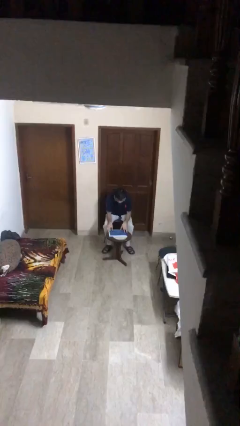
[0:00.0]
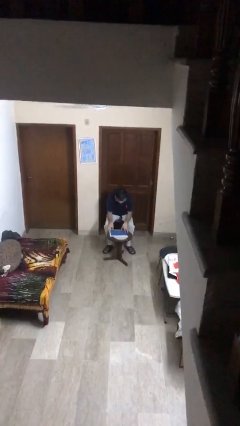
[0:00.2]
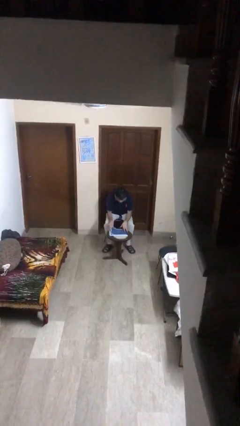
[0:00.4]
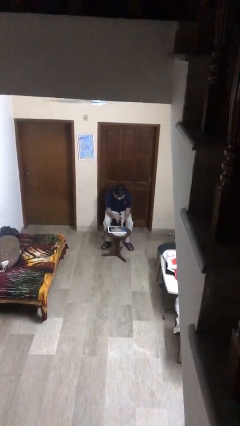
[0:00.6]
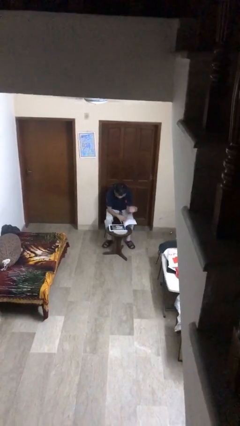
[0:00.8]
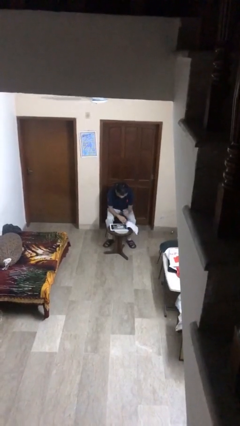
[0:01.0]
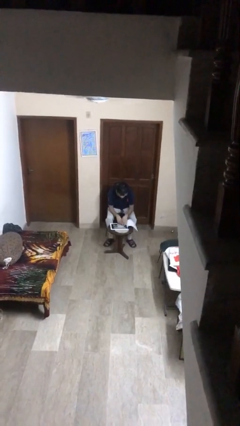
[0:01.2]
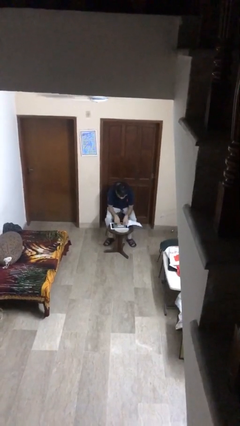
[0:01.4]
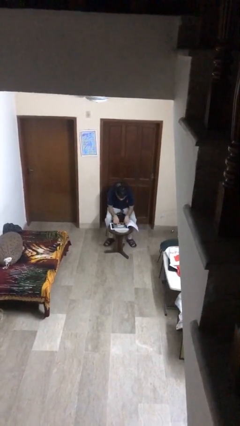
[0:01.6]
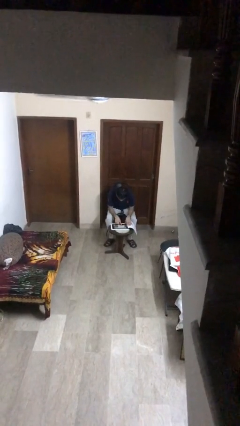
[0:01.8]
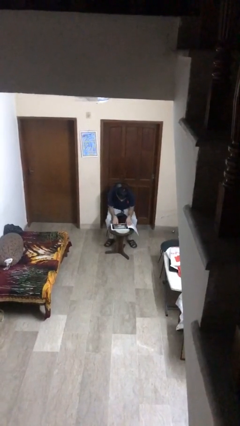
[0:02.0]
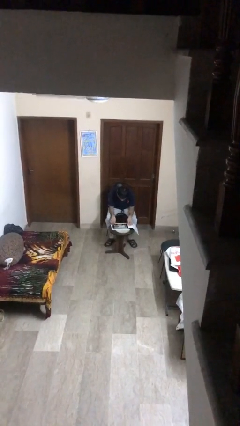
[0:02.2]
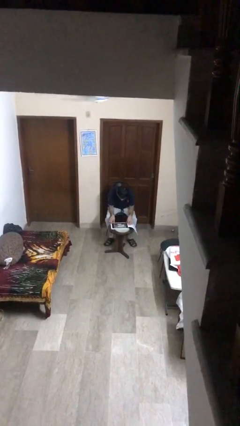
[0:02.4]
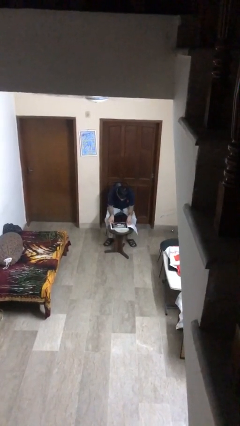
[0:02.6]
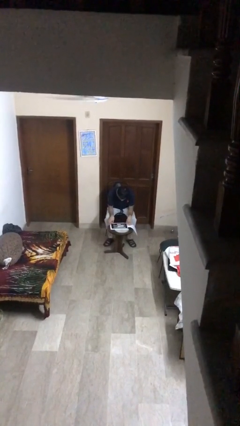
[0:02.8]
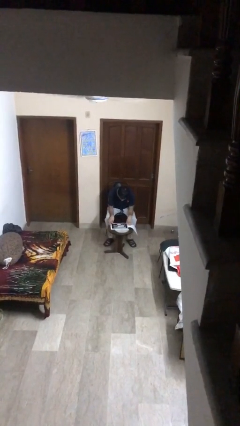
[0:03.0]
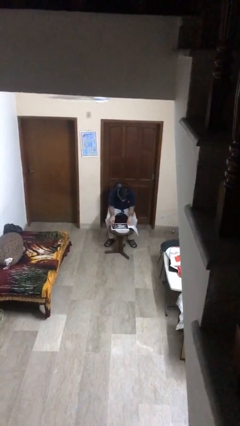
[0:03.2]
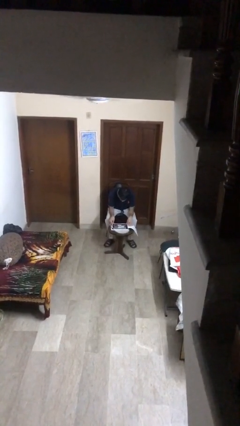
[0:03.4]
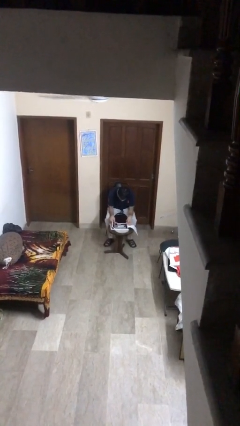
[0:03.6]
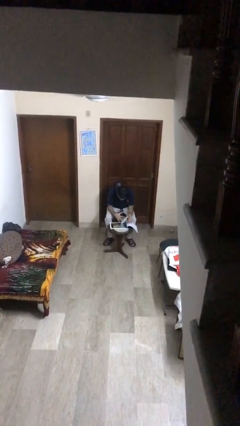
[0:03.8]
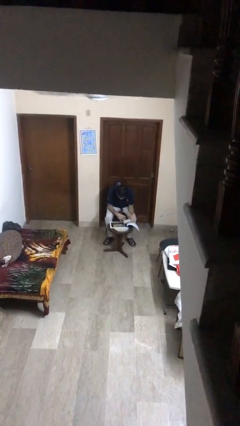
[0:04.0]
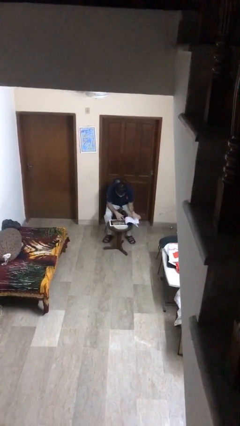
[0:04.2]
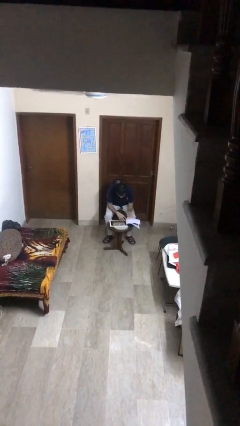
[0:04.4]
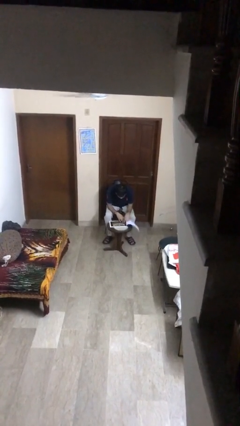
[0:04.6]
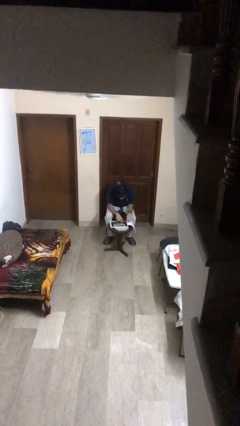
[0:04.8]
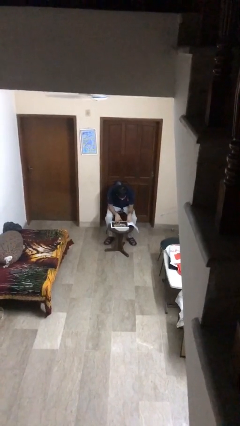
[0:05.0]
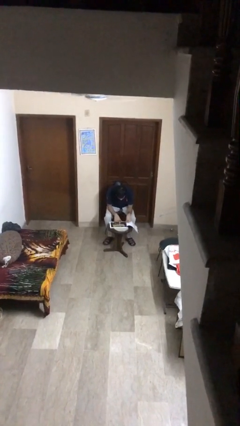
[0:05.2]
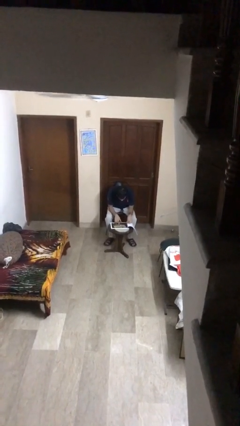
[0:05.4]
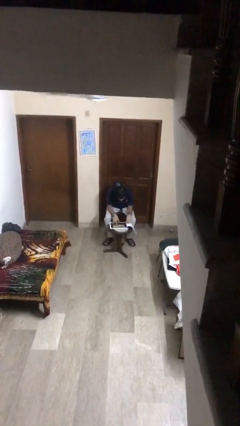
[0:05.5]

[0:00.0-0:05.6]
person reads document

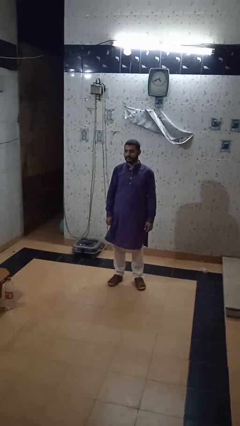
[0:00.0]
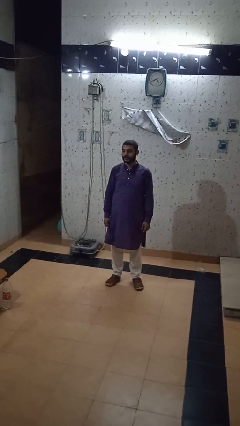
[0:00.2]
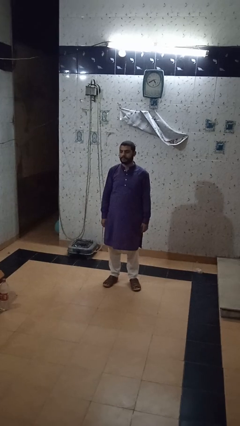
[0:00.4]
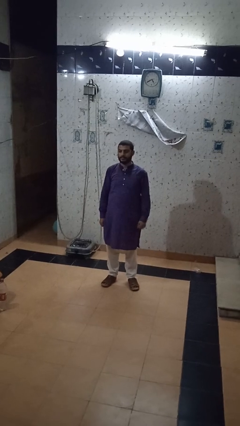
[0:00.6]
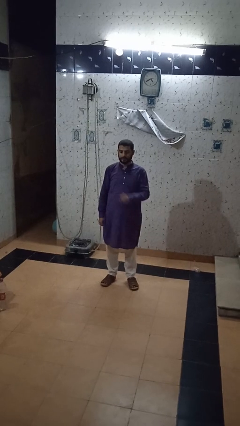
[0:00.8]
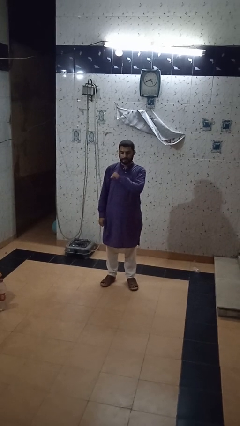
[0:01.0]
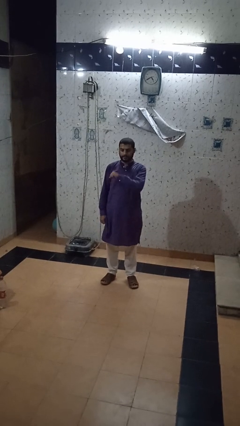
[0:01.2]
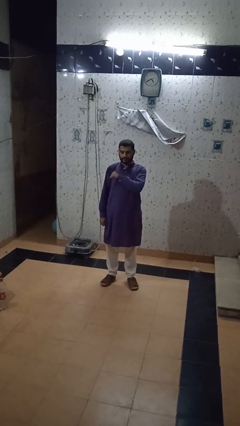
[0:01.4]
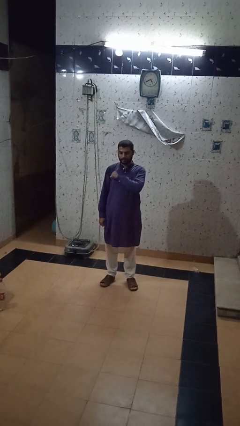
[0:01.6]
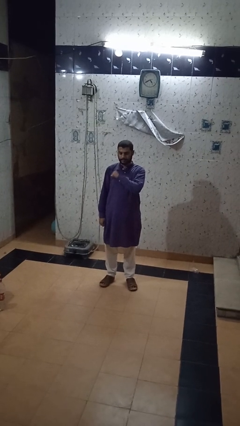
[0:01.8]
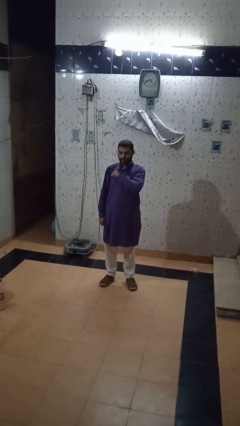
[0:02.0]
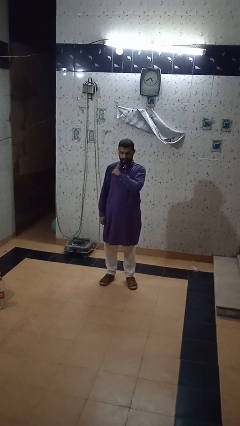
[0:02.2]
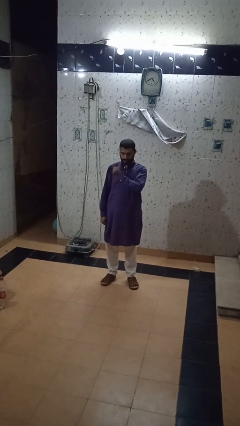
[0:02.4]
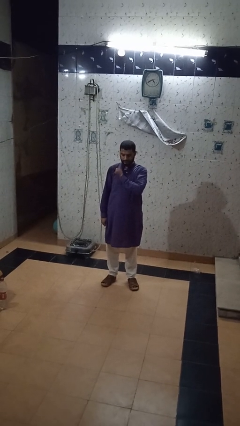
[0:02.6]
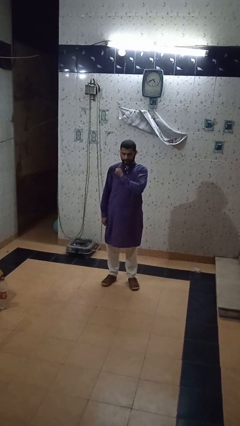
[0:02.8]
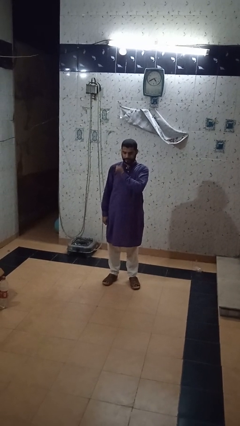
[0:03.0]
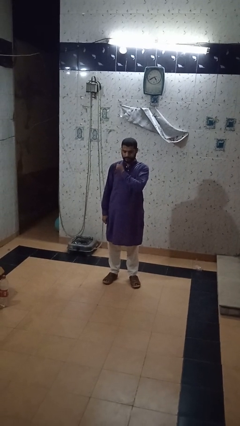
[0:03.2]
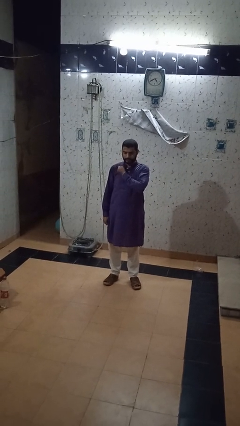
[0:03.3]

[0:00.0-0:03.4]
person drums on chest

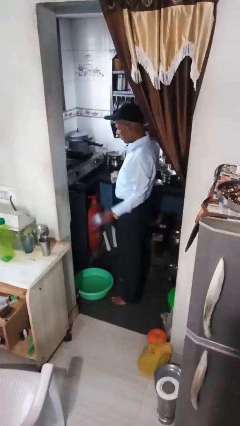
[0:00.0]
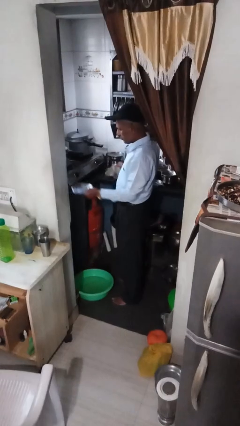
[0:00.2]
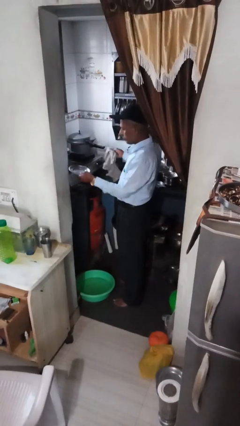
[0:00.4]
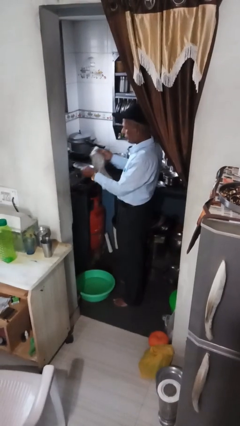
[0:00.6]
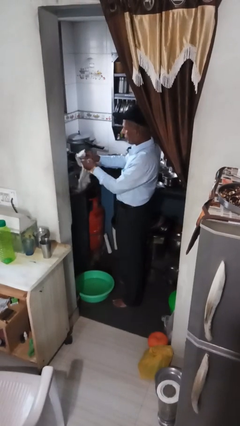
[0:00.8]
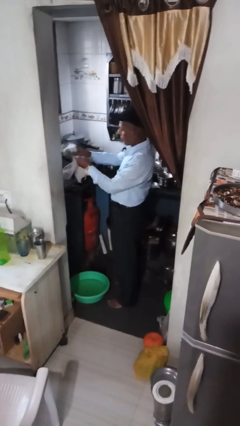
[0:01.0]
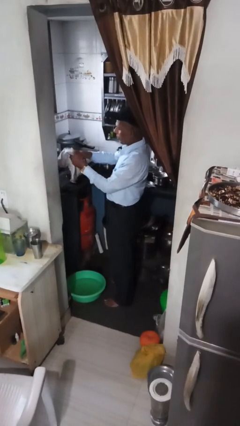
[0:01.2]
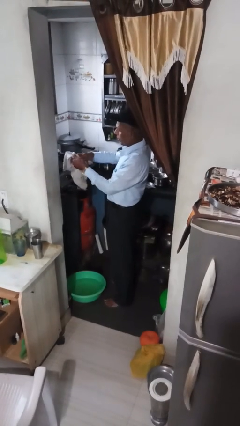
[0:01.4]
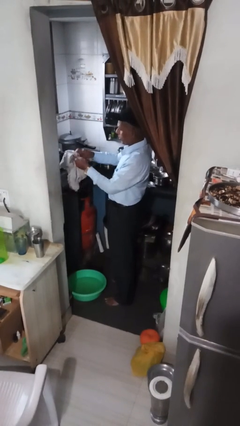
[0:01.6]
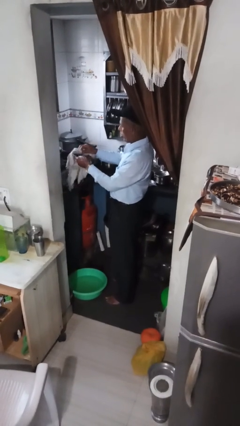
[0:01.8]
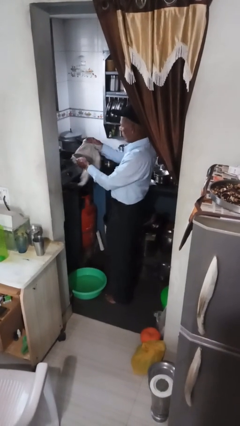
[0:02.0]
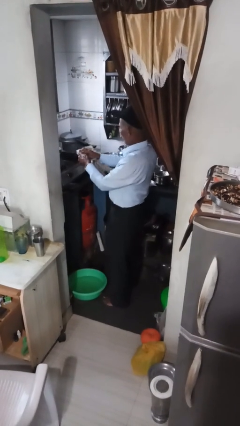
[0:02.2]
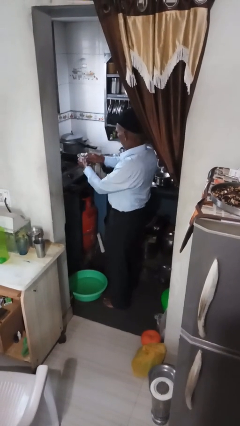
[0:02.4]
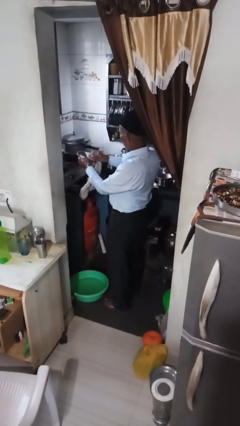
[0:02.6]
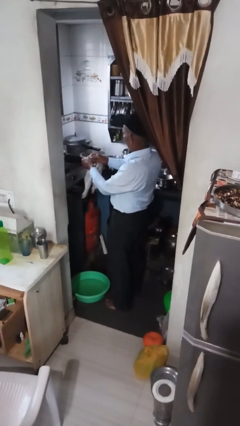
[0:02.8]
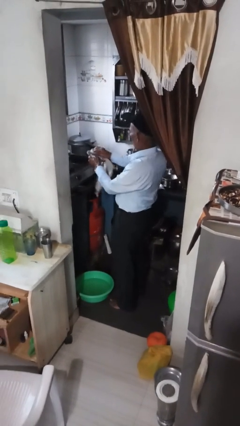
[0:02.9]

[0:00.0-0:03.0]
person dries dish

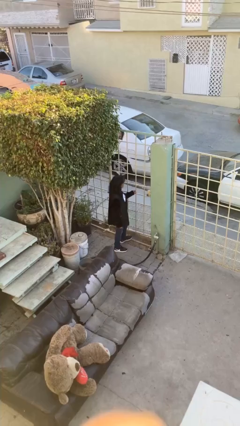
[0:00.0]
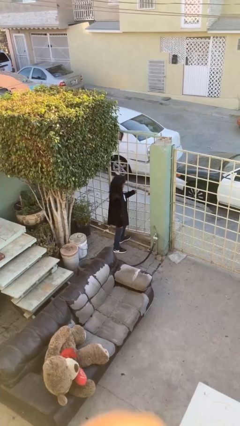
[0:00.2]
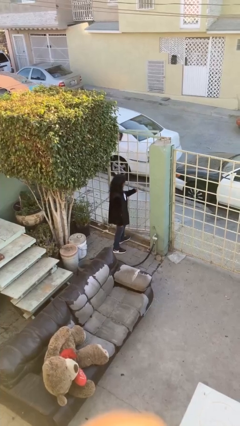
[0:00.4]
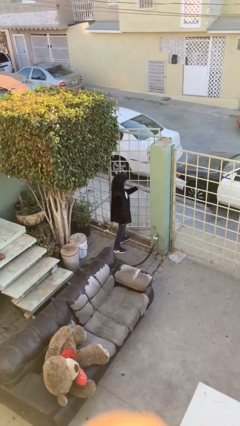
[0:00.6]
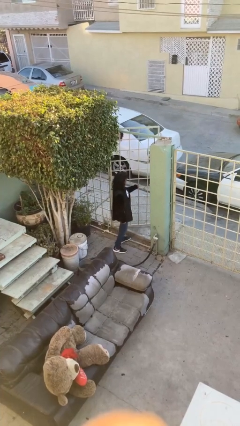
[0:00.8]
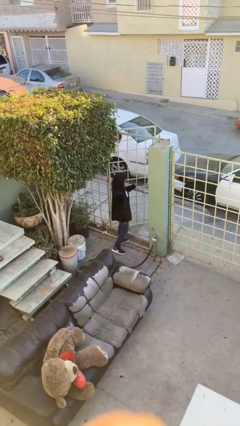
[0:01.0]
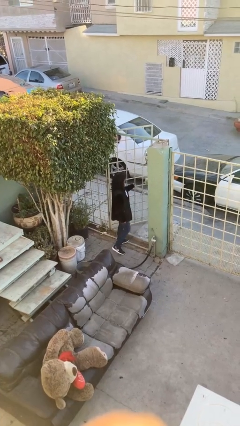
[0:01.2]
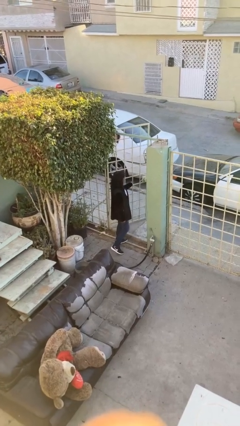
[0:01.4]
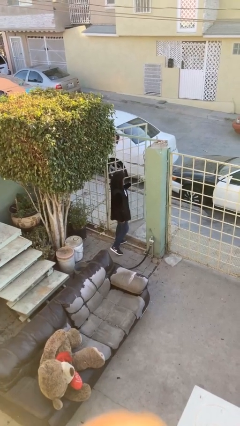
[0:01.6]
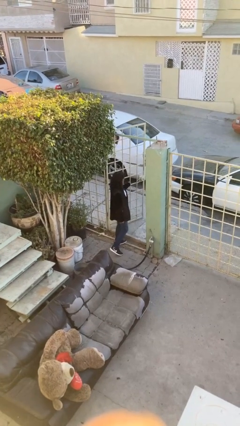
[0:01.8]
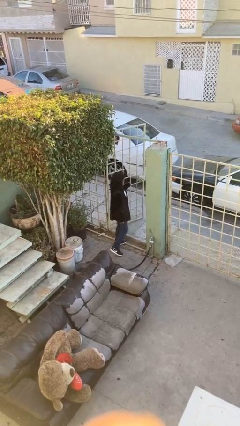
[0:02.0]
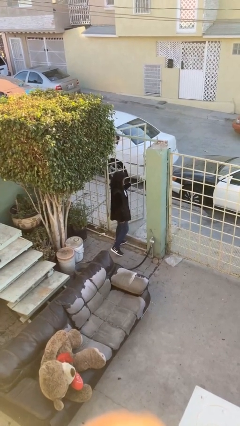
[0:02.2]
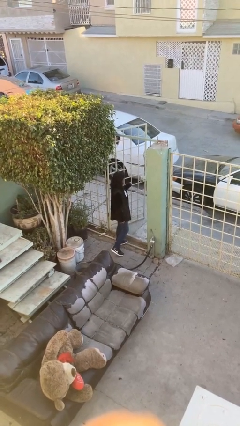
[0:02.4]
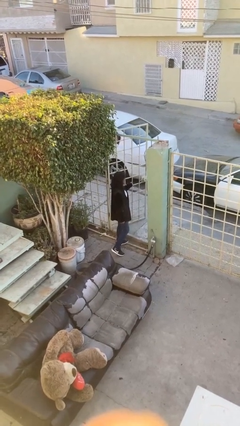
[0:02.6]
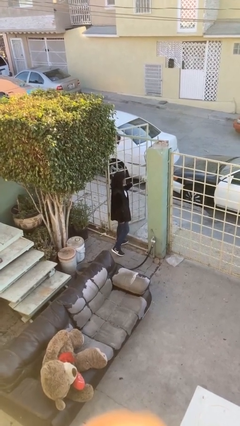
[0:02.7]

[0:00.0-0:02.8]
person opens facility door

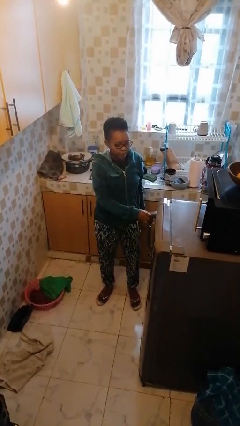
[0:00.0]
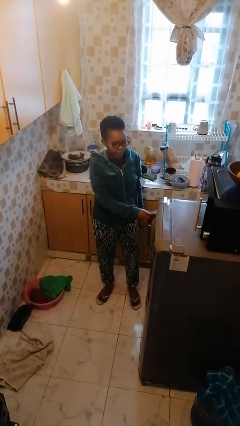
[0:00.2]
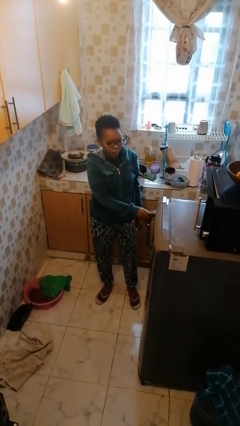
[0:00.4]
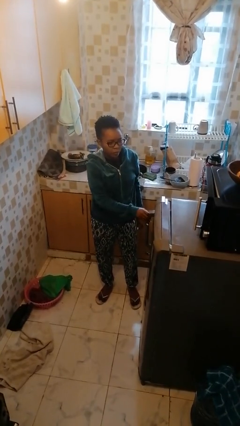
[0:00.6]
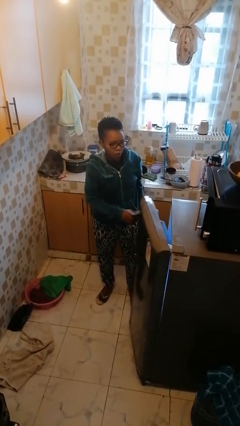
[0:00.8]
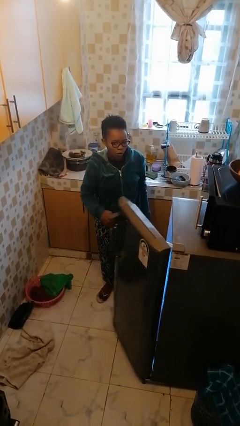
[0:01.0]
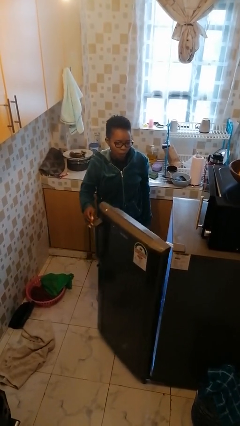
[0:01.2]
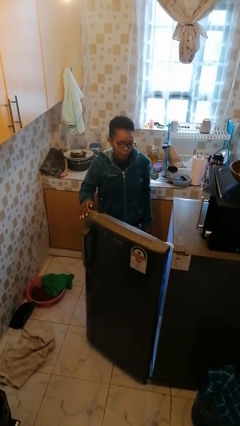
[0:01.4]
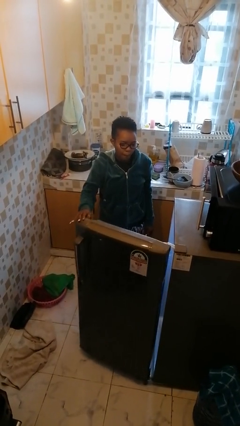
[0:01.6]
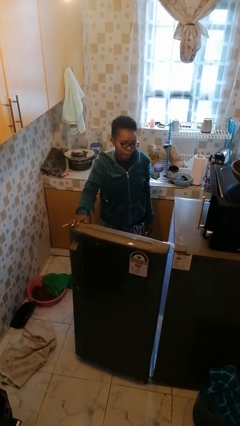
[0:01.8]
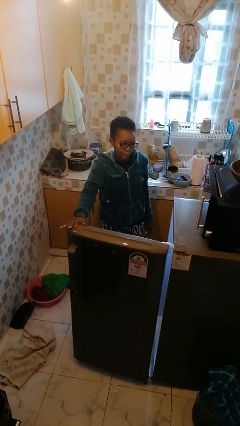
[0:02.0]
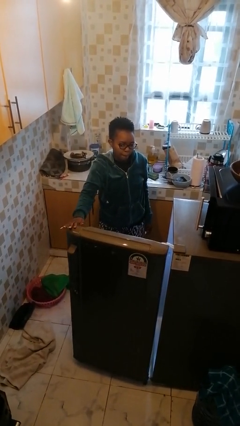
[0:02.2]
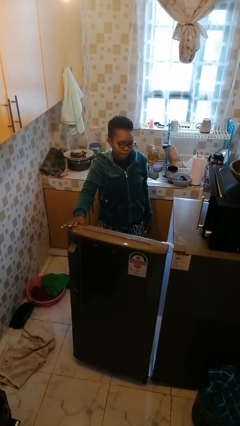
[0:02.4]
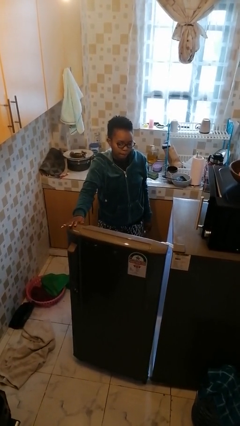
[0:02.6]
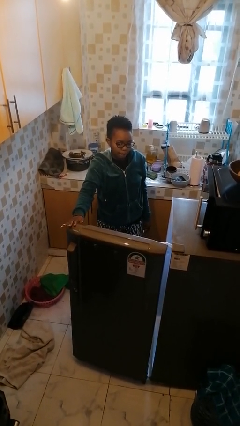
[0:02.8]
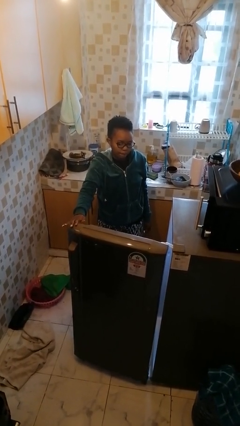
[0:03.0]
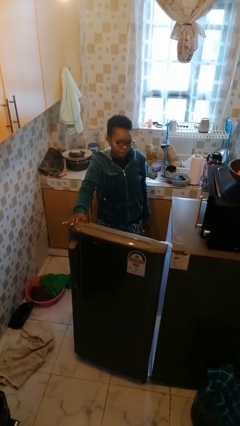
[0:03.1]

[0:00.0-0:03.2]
person opens refrigerator
